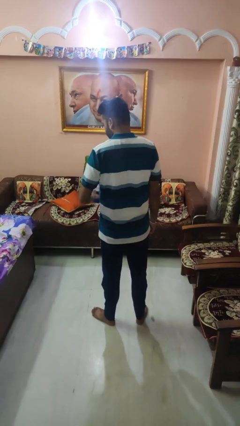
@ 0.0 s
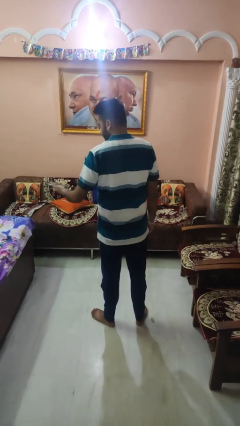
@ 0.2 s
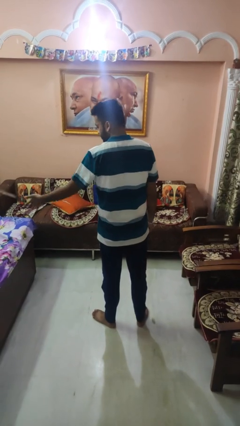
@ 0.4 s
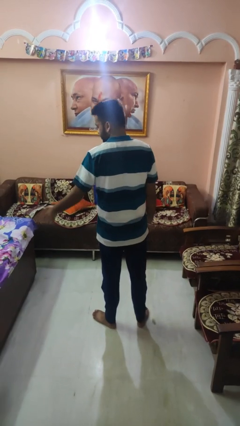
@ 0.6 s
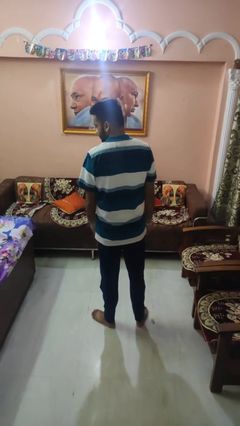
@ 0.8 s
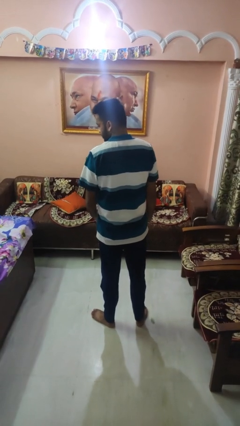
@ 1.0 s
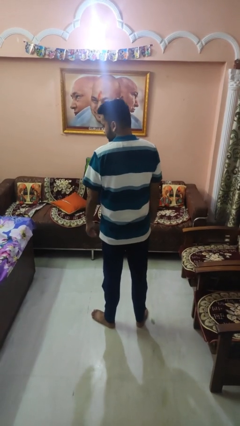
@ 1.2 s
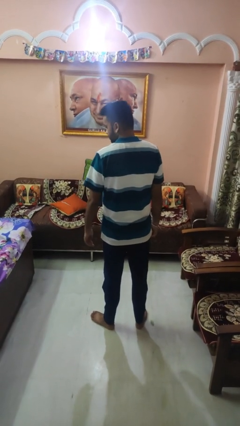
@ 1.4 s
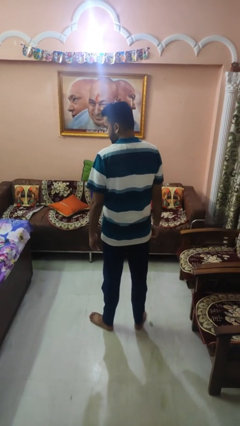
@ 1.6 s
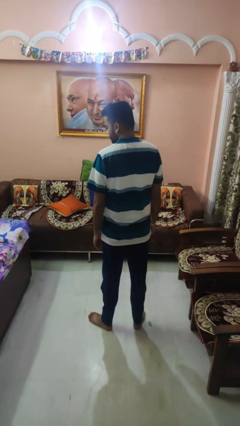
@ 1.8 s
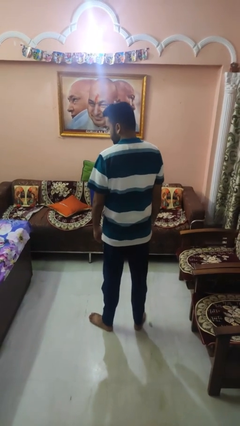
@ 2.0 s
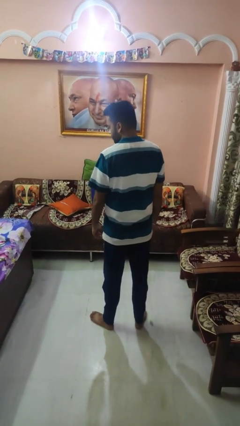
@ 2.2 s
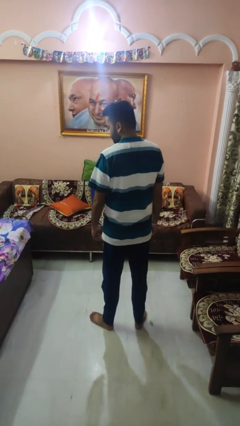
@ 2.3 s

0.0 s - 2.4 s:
person throws object on bed

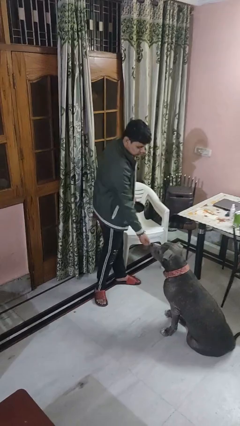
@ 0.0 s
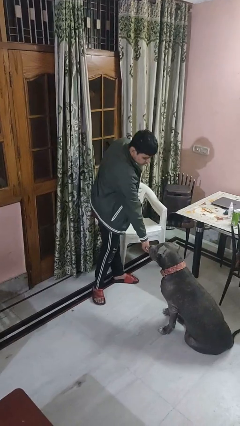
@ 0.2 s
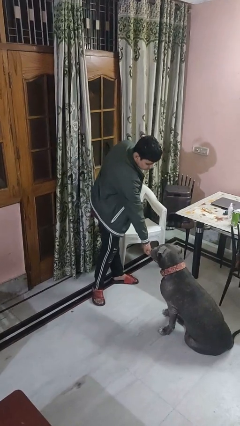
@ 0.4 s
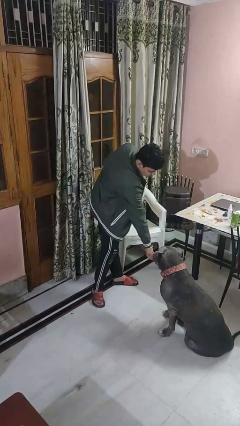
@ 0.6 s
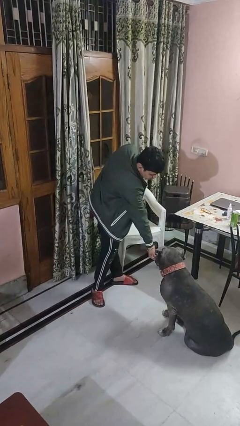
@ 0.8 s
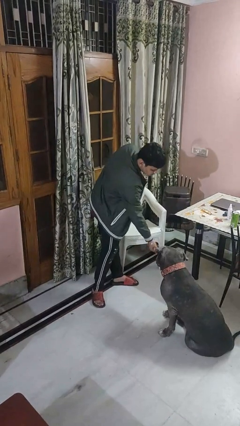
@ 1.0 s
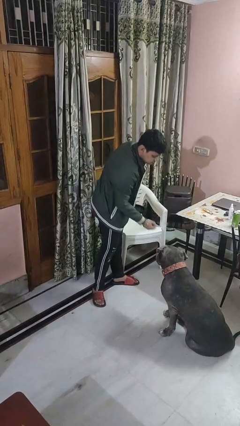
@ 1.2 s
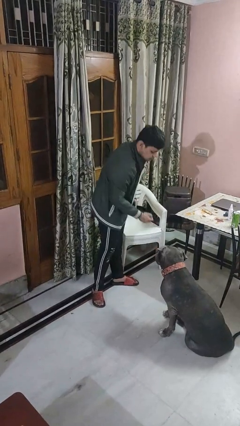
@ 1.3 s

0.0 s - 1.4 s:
person feeds dog

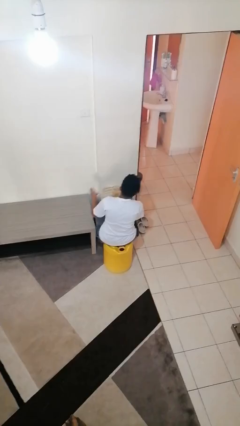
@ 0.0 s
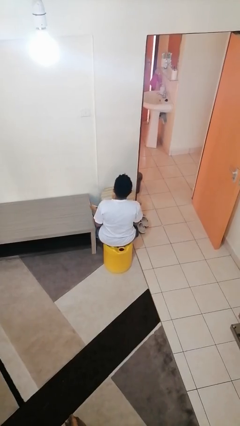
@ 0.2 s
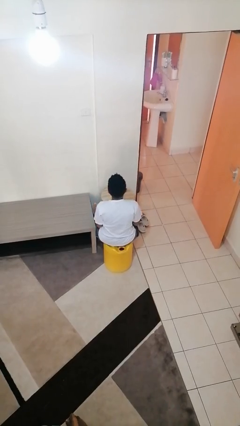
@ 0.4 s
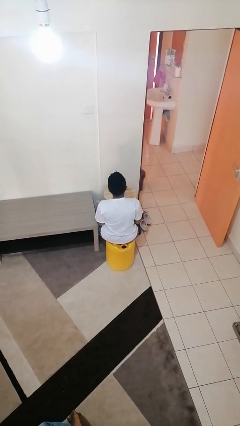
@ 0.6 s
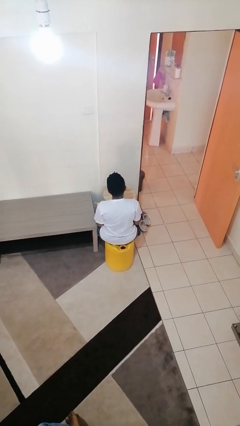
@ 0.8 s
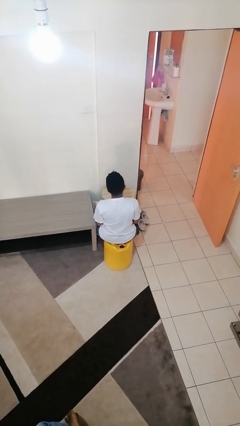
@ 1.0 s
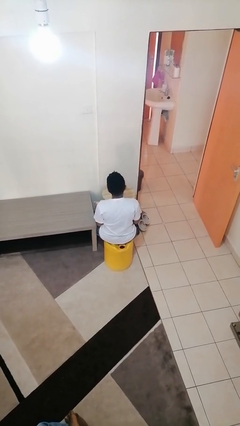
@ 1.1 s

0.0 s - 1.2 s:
person opens jar

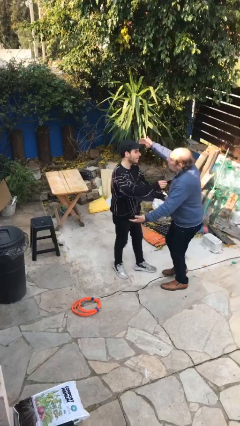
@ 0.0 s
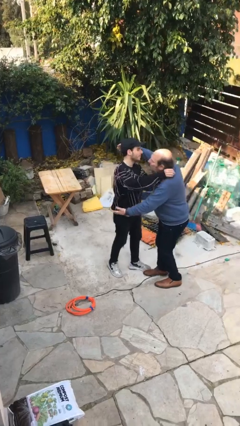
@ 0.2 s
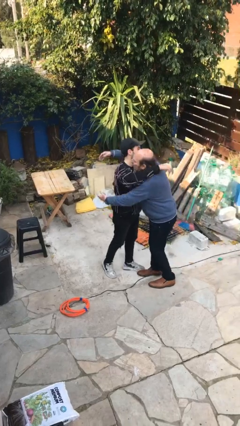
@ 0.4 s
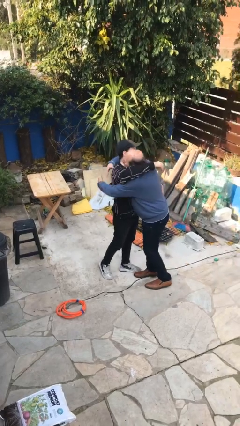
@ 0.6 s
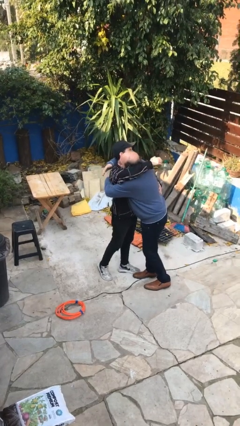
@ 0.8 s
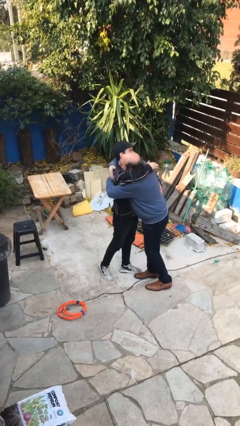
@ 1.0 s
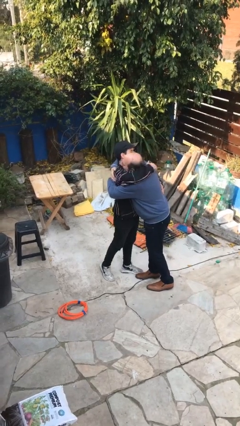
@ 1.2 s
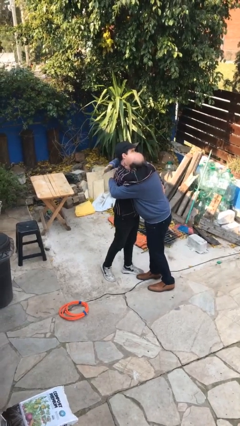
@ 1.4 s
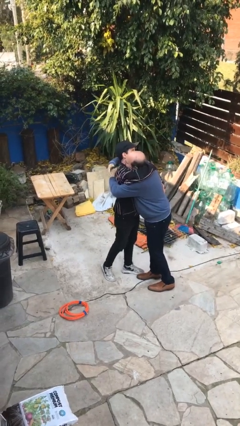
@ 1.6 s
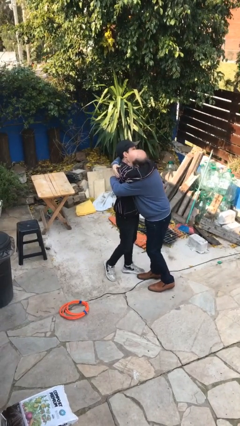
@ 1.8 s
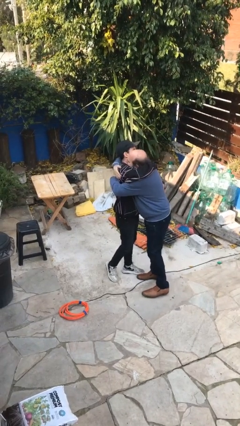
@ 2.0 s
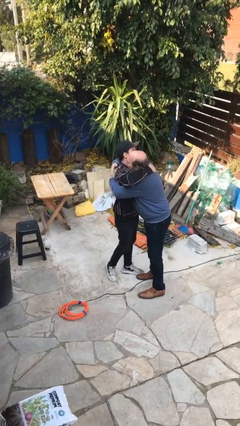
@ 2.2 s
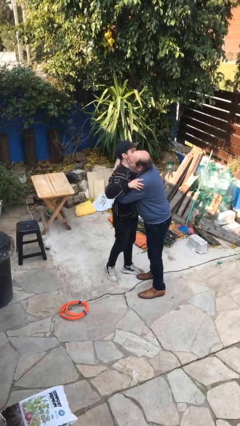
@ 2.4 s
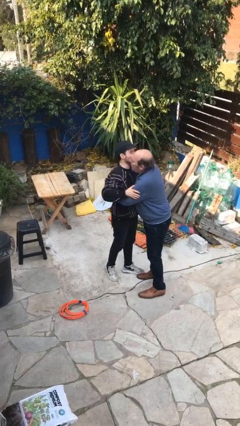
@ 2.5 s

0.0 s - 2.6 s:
person embraces person

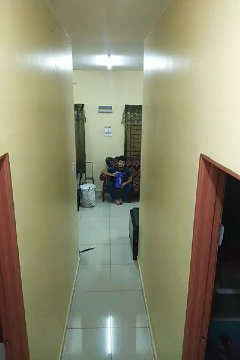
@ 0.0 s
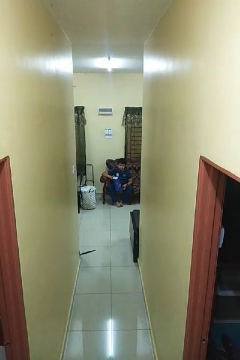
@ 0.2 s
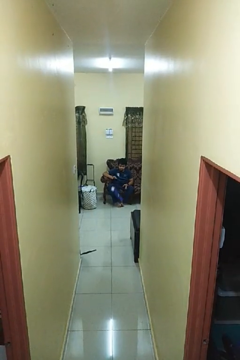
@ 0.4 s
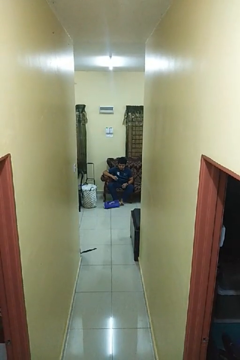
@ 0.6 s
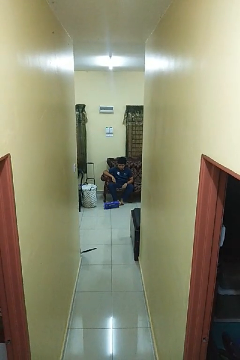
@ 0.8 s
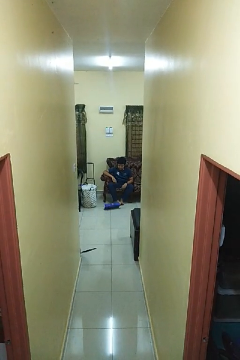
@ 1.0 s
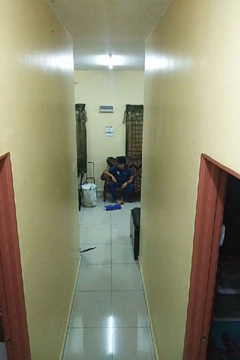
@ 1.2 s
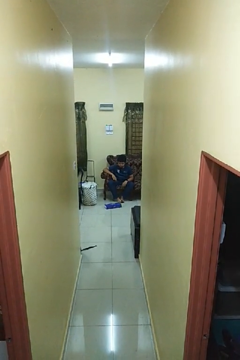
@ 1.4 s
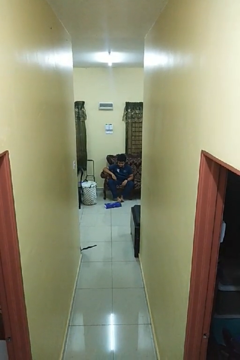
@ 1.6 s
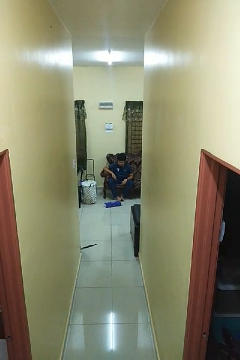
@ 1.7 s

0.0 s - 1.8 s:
person drops object

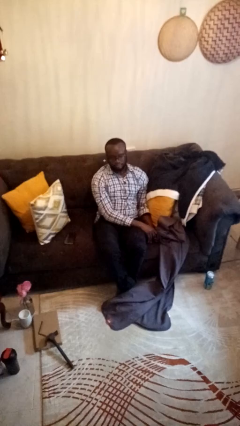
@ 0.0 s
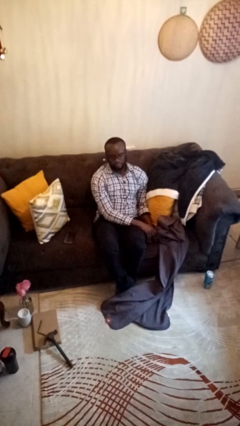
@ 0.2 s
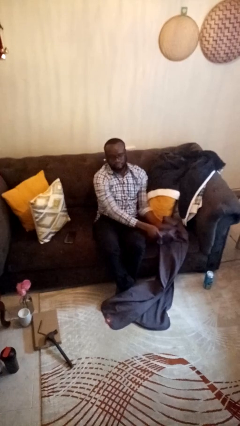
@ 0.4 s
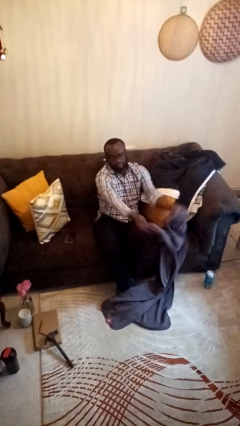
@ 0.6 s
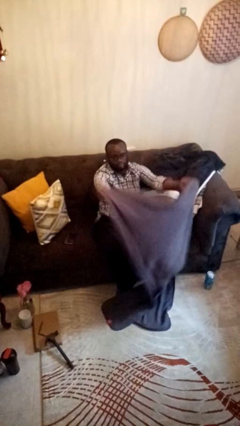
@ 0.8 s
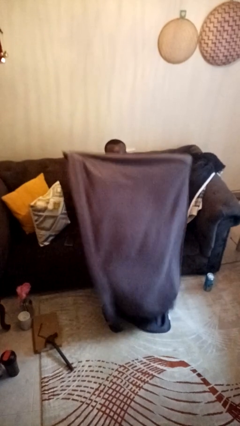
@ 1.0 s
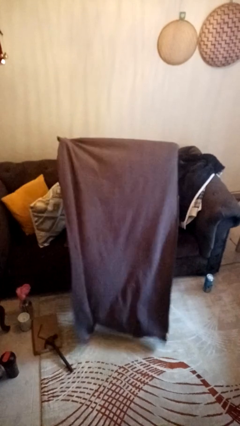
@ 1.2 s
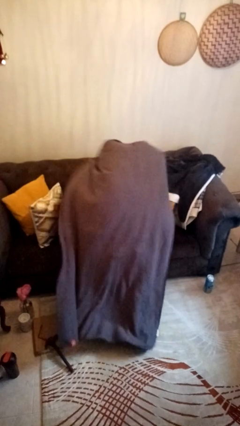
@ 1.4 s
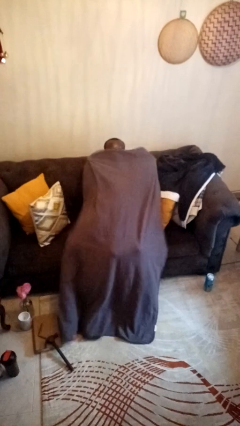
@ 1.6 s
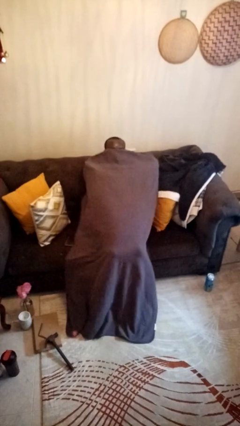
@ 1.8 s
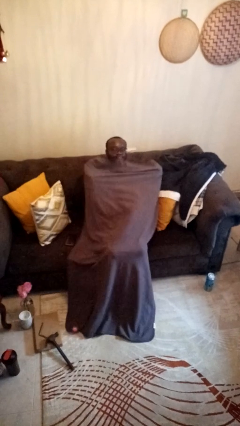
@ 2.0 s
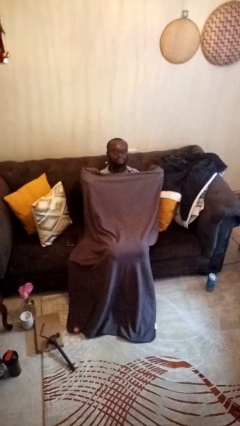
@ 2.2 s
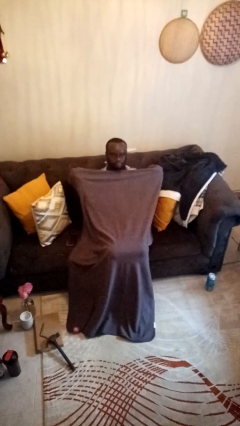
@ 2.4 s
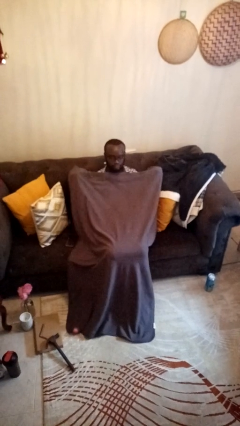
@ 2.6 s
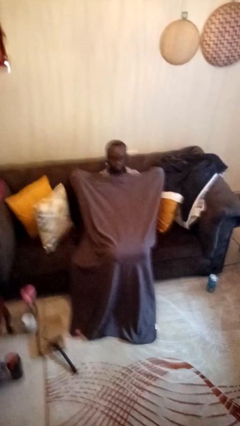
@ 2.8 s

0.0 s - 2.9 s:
person covers with blanket

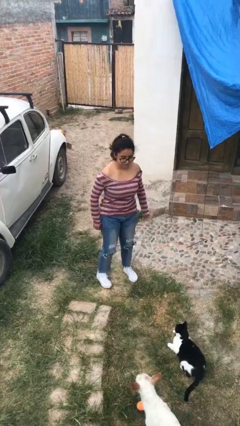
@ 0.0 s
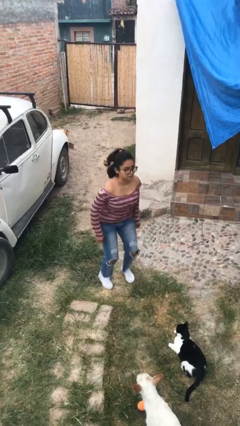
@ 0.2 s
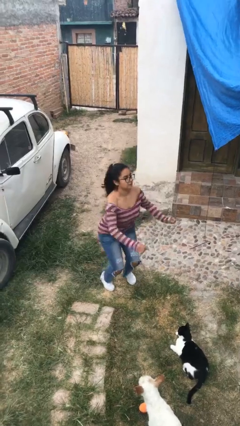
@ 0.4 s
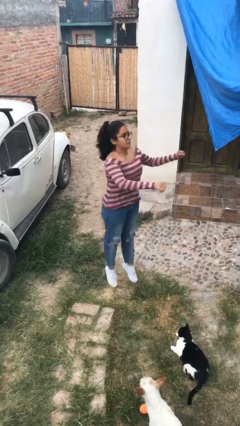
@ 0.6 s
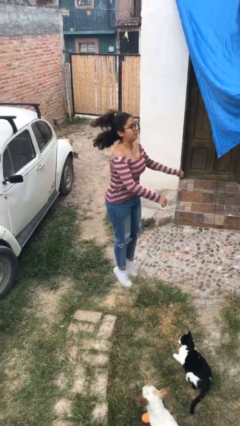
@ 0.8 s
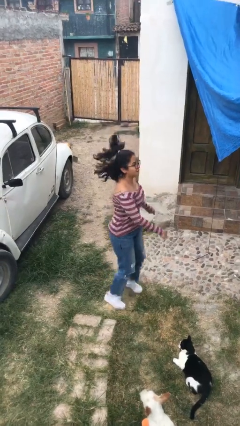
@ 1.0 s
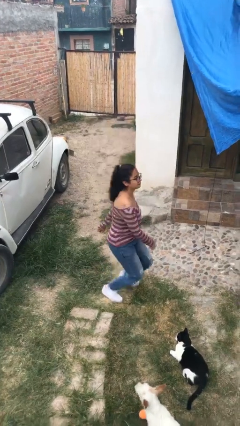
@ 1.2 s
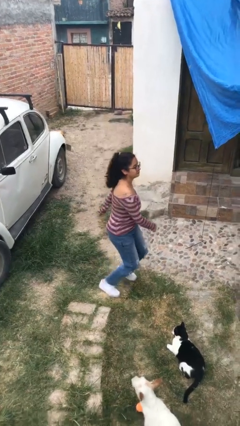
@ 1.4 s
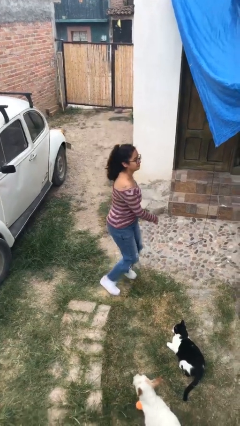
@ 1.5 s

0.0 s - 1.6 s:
person jumps

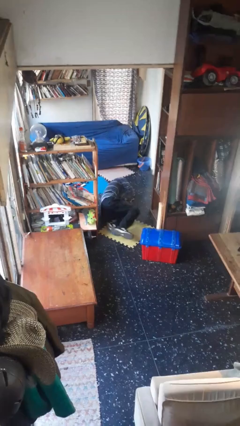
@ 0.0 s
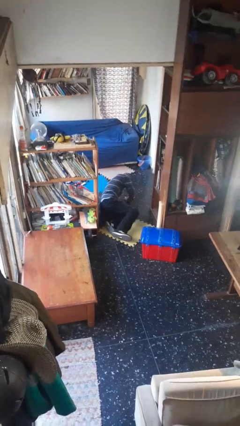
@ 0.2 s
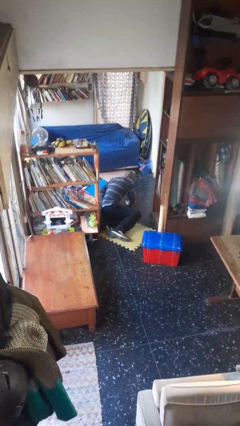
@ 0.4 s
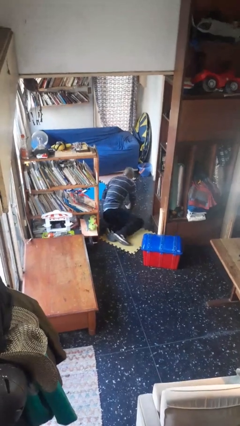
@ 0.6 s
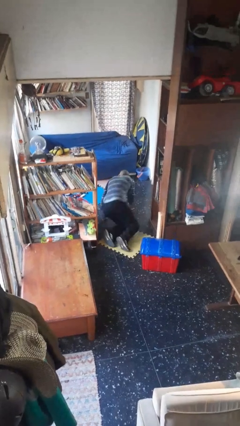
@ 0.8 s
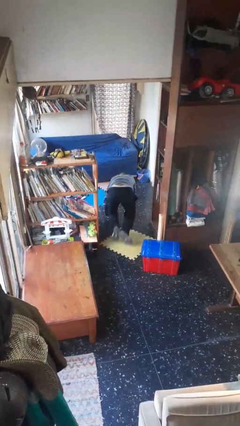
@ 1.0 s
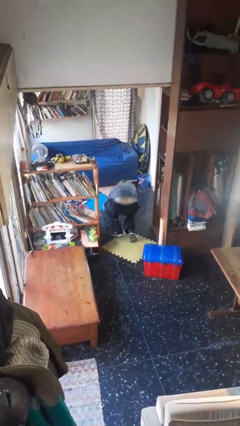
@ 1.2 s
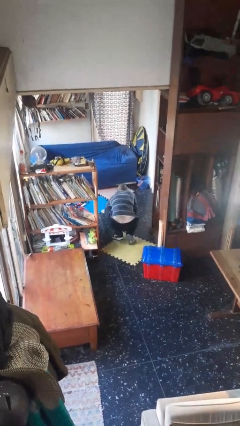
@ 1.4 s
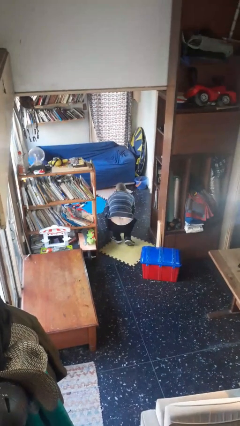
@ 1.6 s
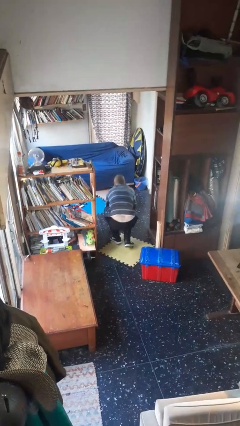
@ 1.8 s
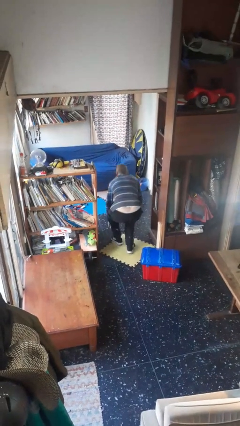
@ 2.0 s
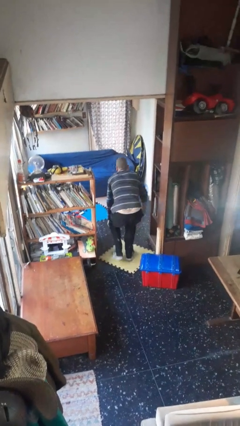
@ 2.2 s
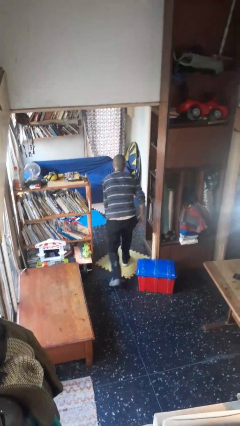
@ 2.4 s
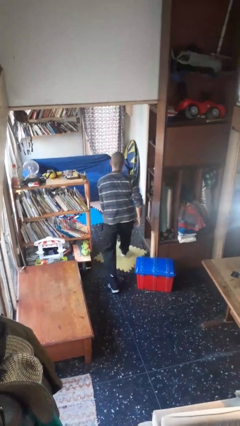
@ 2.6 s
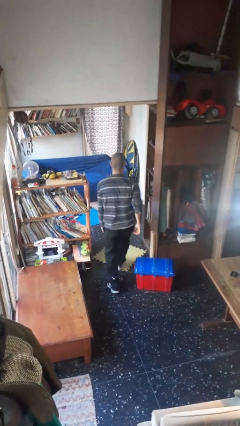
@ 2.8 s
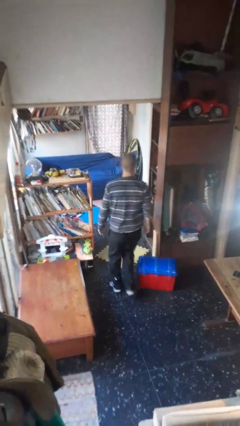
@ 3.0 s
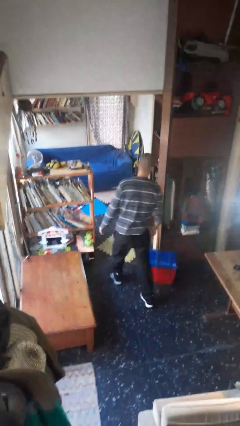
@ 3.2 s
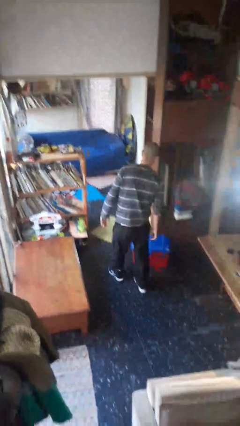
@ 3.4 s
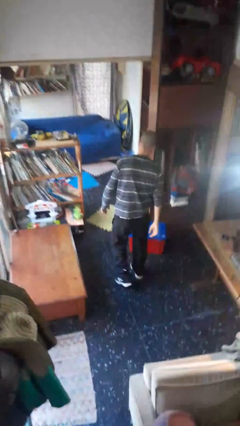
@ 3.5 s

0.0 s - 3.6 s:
person stands up from floor
